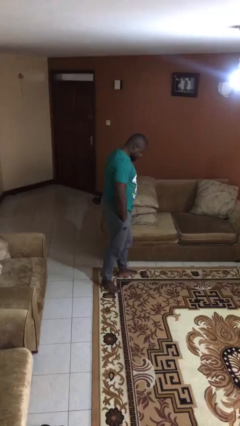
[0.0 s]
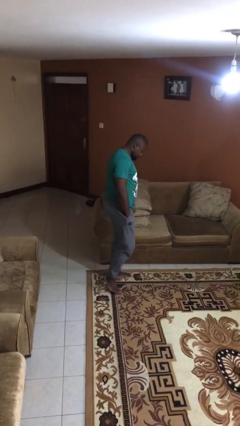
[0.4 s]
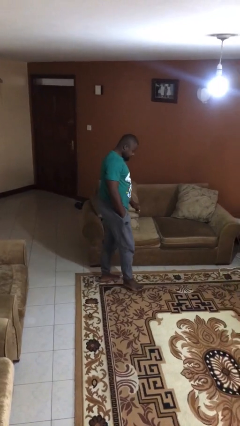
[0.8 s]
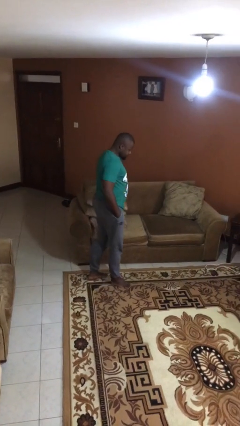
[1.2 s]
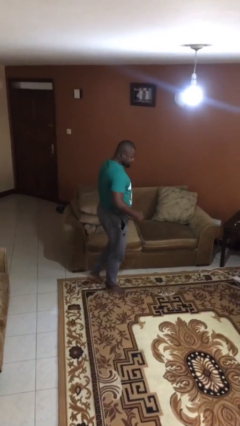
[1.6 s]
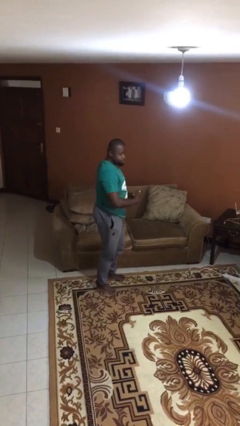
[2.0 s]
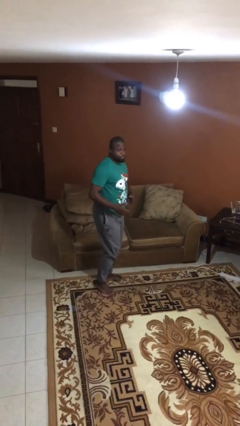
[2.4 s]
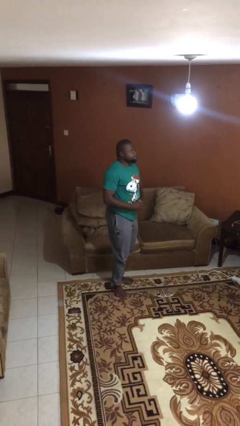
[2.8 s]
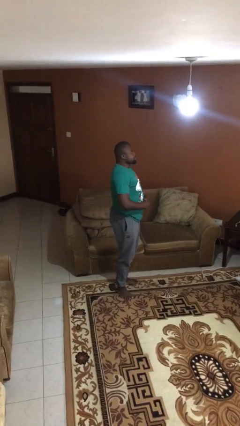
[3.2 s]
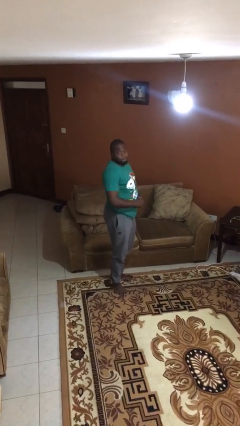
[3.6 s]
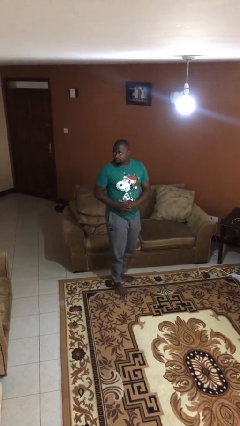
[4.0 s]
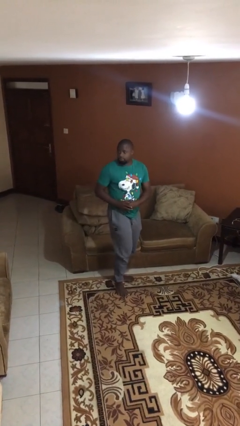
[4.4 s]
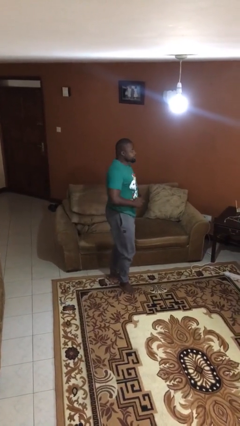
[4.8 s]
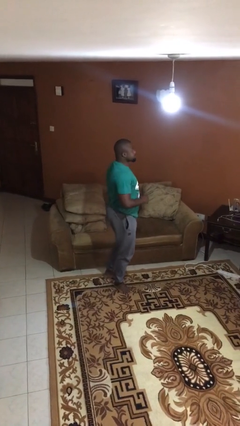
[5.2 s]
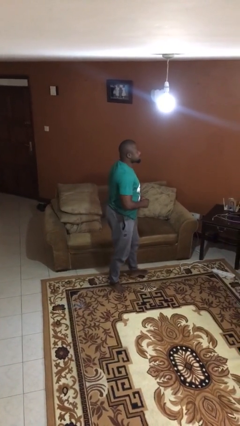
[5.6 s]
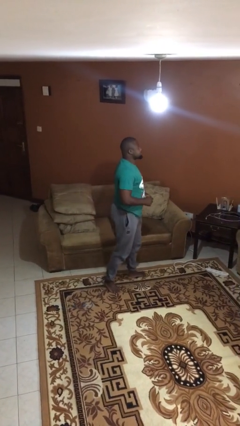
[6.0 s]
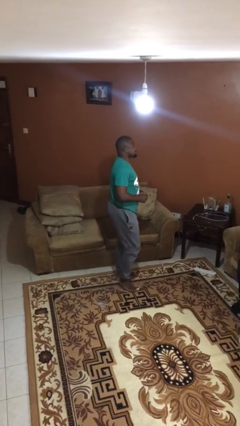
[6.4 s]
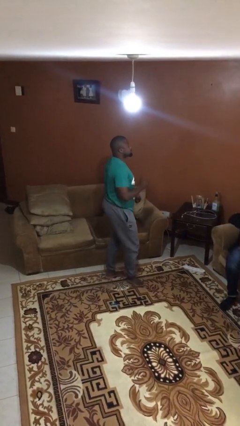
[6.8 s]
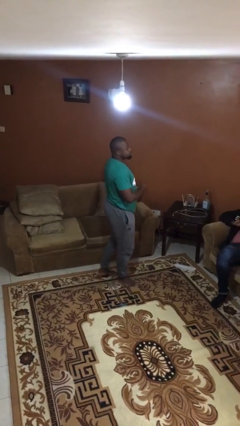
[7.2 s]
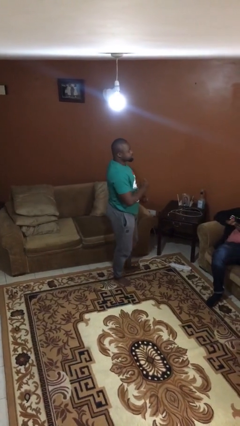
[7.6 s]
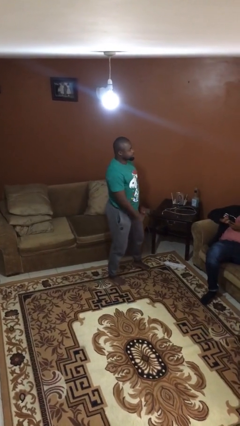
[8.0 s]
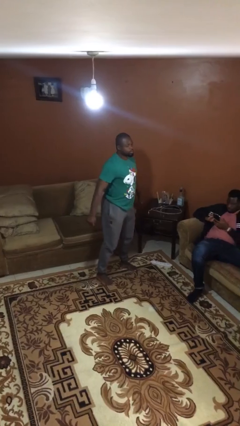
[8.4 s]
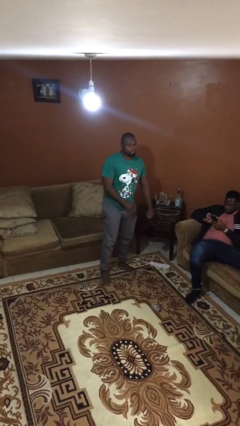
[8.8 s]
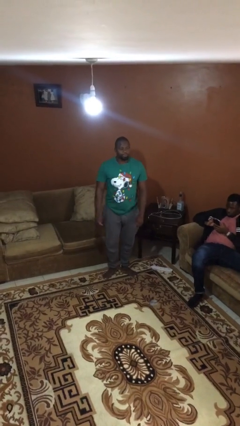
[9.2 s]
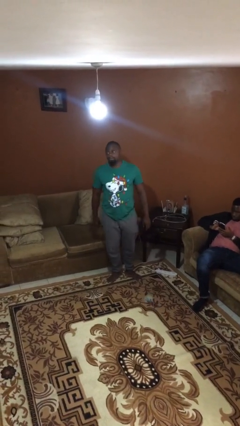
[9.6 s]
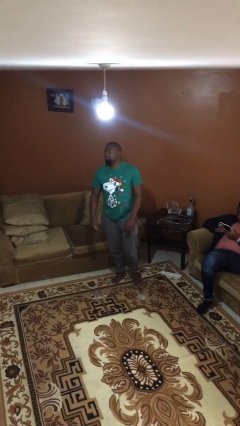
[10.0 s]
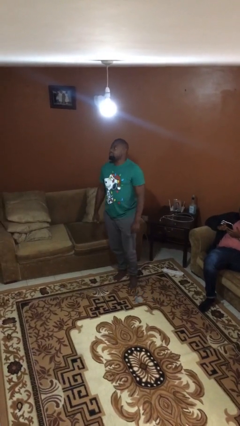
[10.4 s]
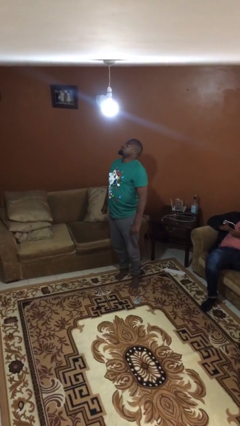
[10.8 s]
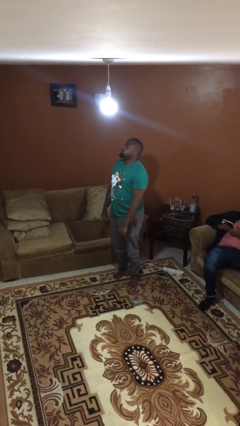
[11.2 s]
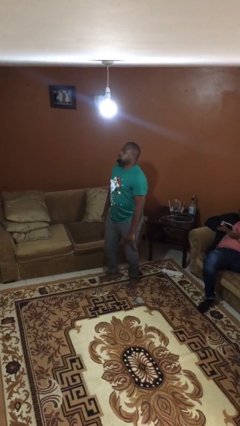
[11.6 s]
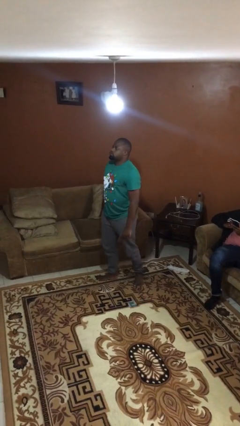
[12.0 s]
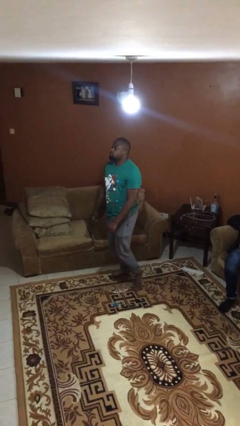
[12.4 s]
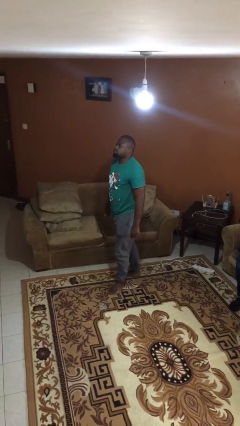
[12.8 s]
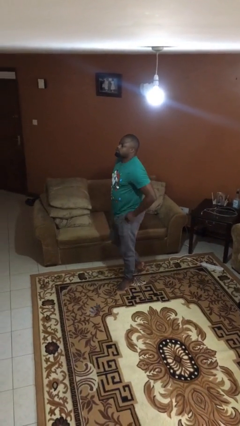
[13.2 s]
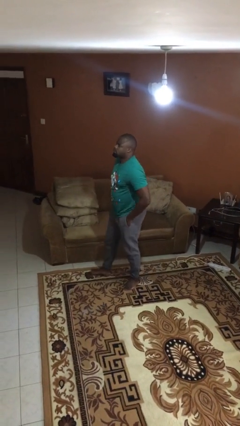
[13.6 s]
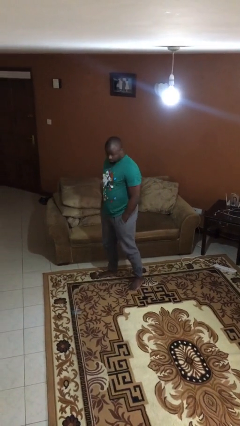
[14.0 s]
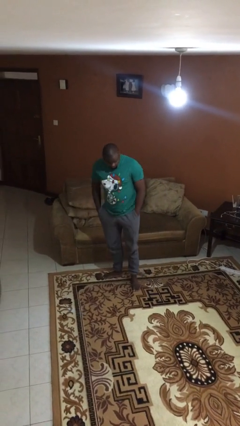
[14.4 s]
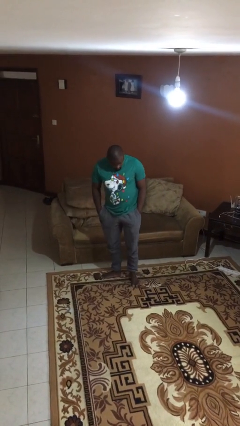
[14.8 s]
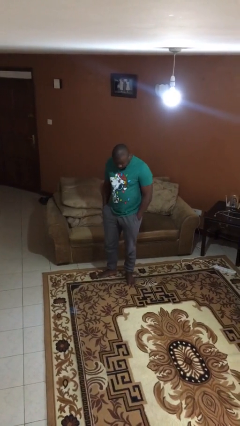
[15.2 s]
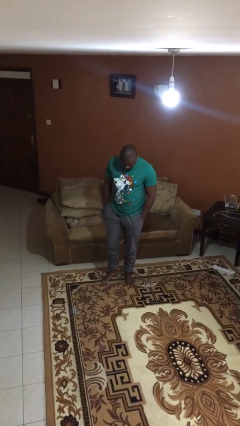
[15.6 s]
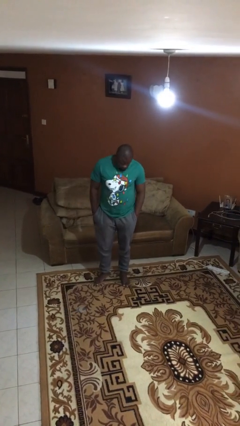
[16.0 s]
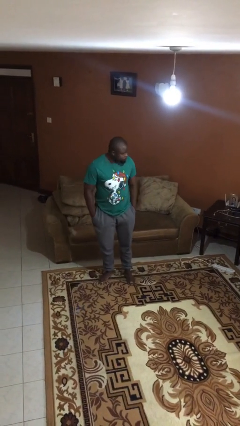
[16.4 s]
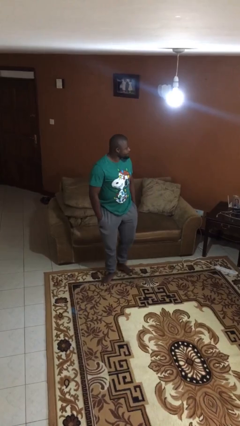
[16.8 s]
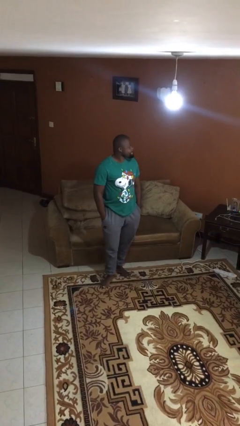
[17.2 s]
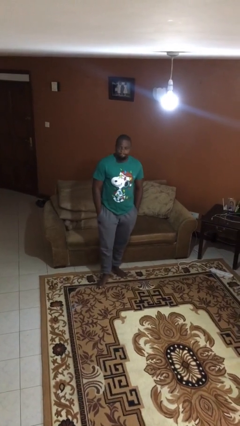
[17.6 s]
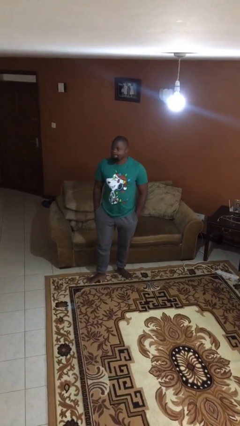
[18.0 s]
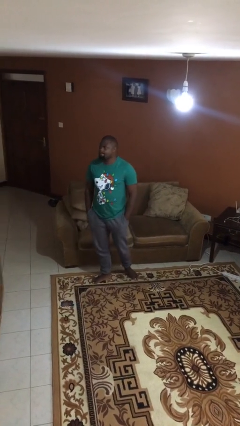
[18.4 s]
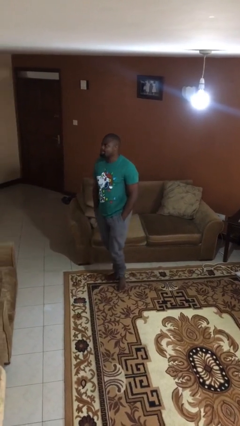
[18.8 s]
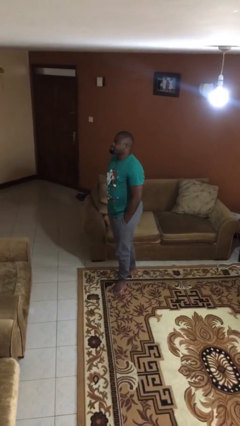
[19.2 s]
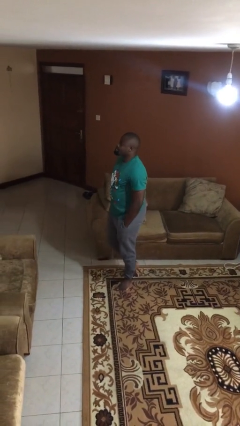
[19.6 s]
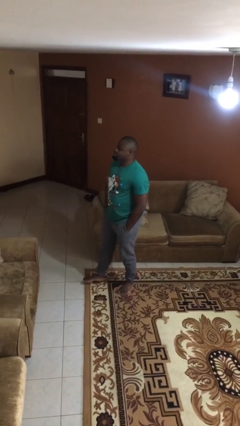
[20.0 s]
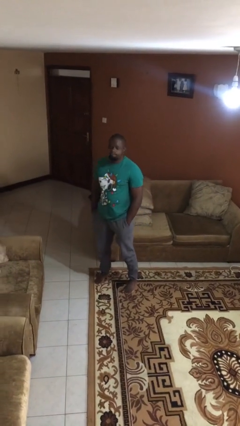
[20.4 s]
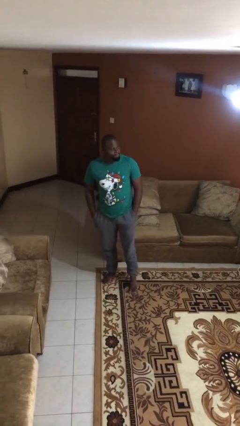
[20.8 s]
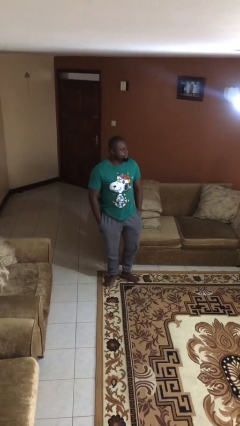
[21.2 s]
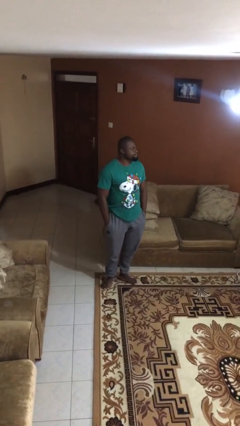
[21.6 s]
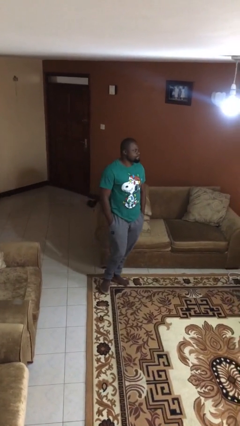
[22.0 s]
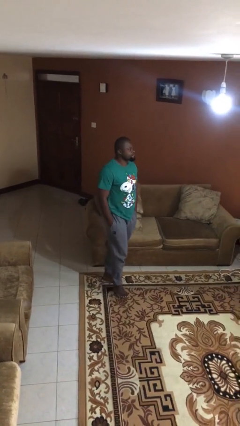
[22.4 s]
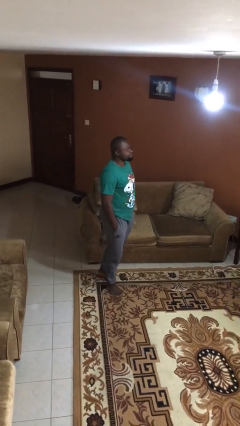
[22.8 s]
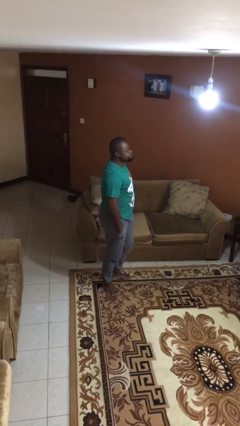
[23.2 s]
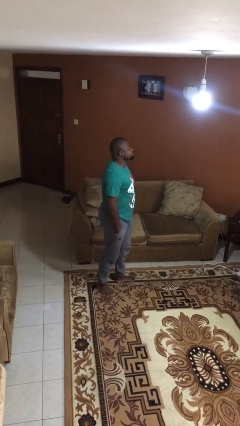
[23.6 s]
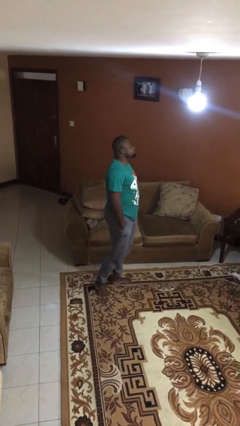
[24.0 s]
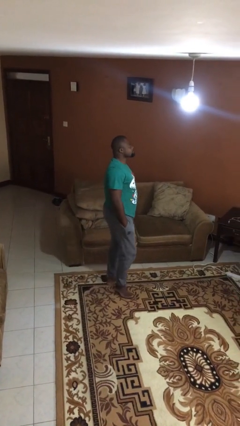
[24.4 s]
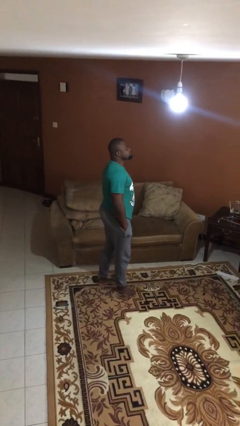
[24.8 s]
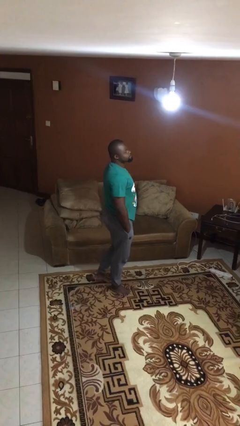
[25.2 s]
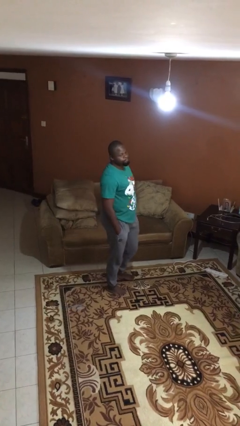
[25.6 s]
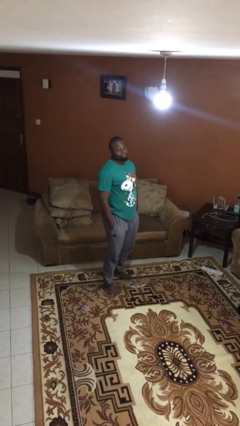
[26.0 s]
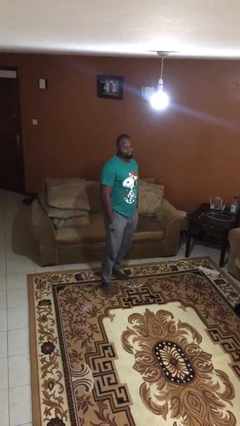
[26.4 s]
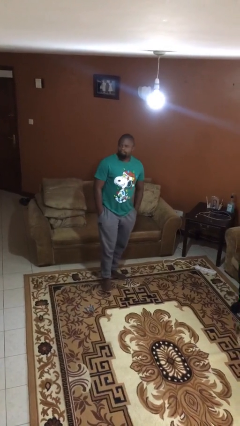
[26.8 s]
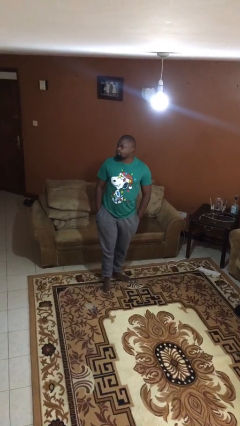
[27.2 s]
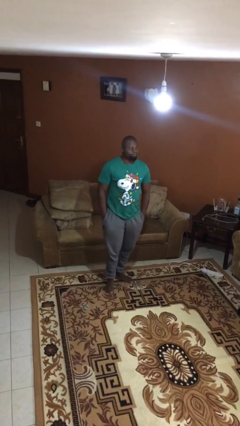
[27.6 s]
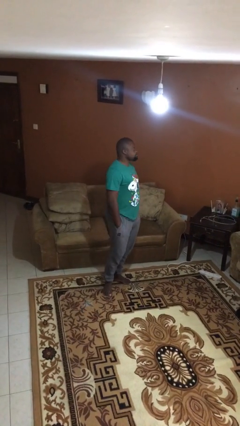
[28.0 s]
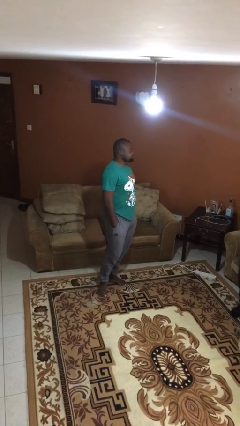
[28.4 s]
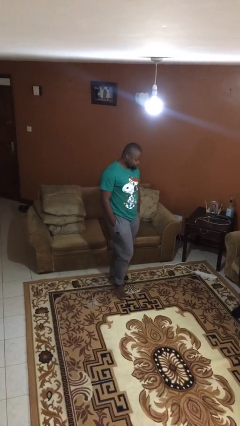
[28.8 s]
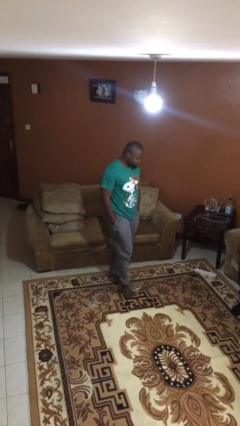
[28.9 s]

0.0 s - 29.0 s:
person walks

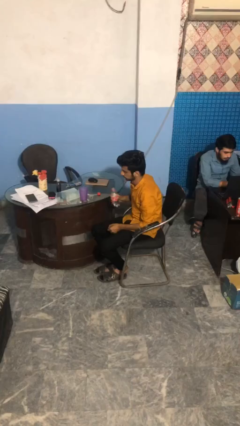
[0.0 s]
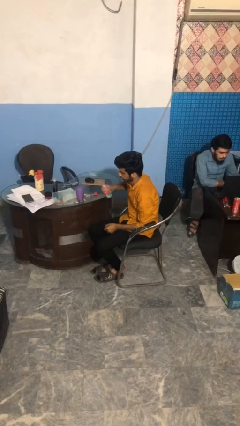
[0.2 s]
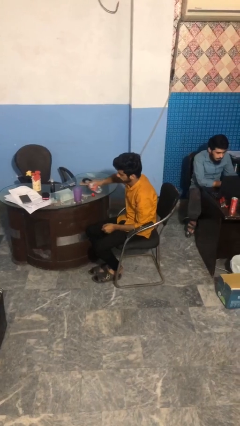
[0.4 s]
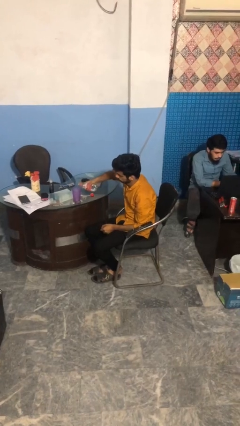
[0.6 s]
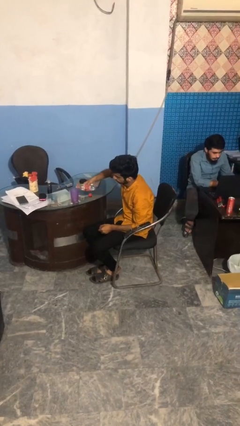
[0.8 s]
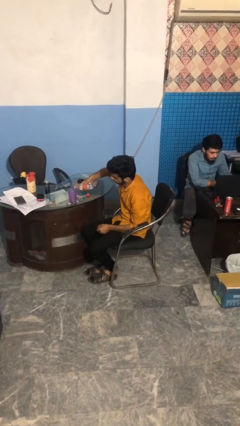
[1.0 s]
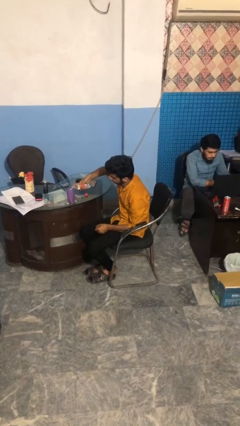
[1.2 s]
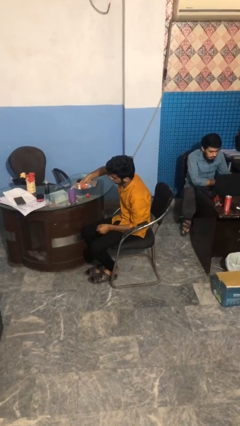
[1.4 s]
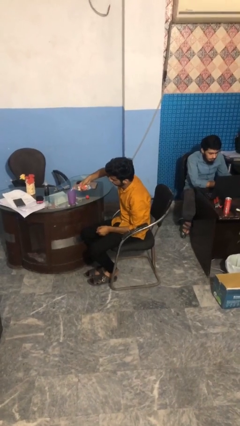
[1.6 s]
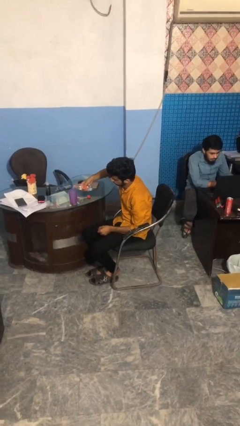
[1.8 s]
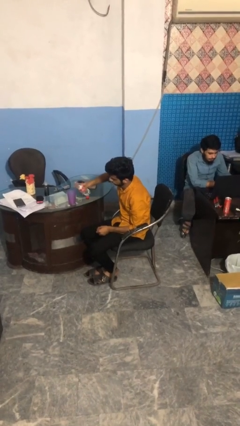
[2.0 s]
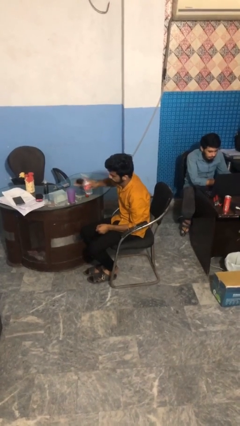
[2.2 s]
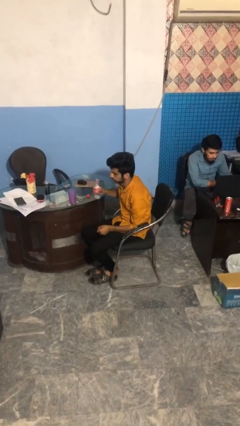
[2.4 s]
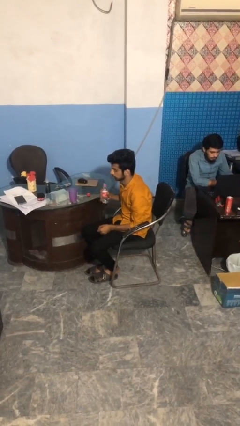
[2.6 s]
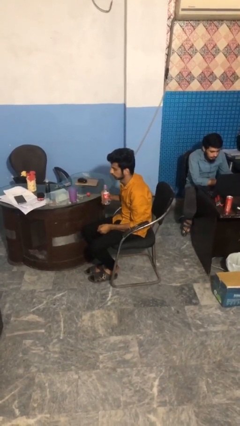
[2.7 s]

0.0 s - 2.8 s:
person pours liquid into cup

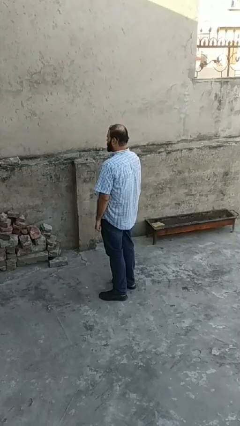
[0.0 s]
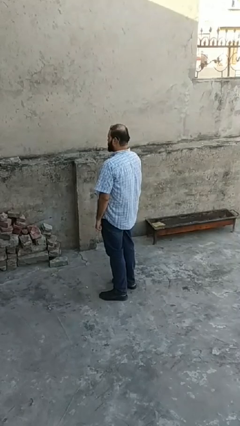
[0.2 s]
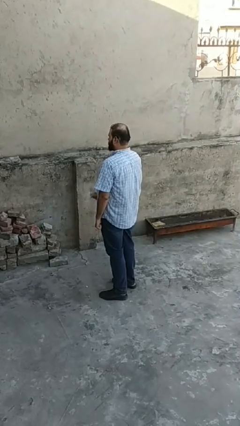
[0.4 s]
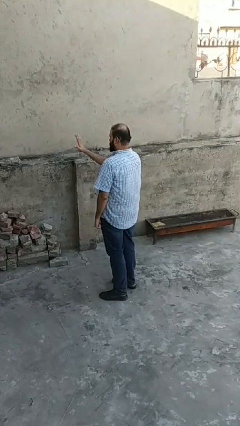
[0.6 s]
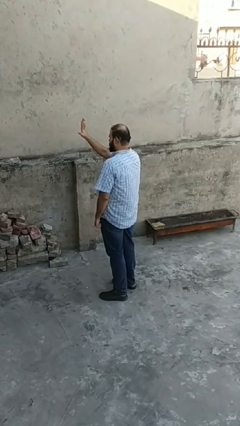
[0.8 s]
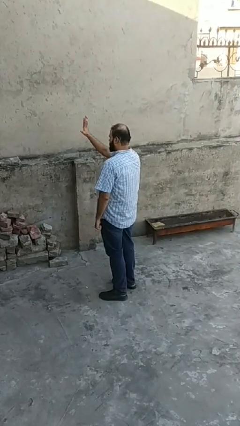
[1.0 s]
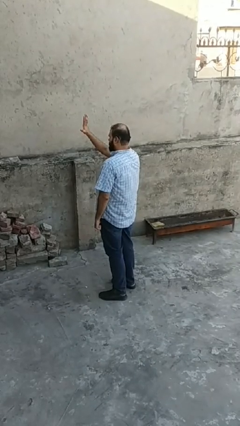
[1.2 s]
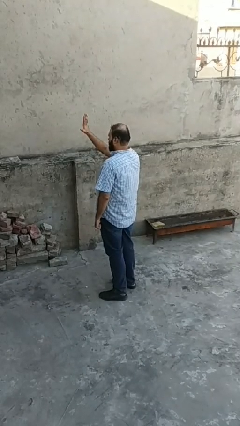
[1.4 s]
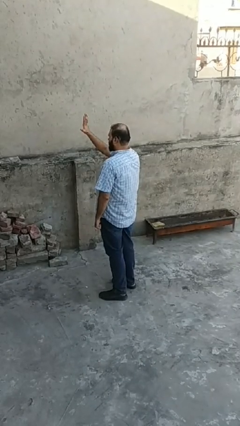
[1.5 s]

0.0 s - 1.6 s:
person gestures number five
